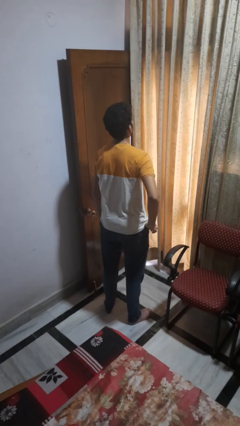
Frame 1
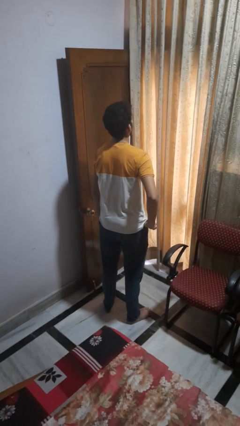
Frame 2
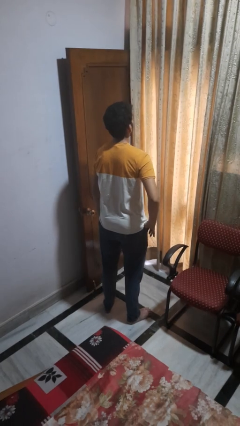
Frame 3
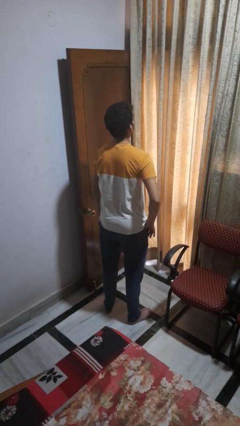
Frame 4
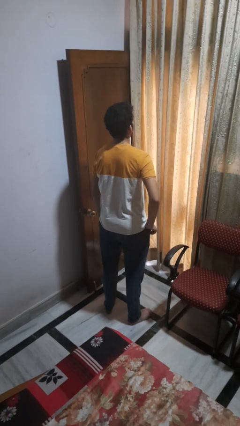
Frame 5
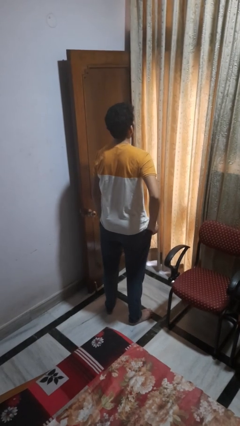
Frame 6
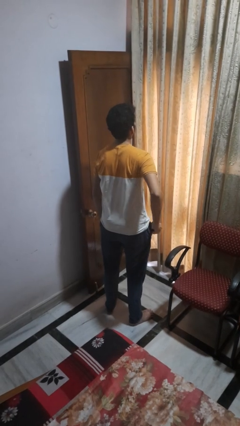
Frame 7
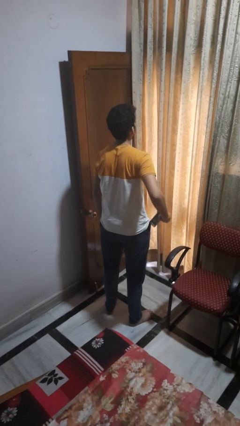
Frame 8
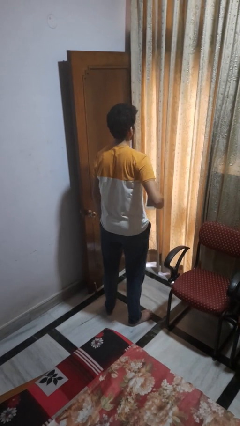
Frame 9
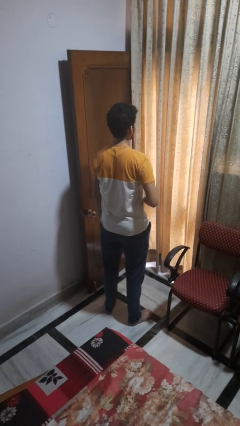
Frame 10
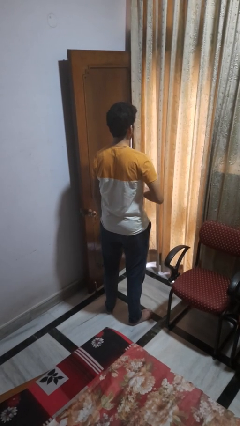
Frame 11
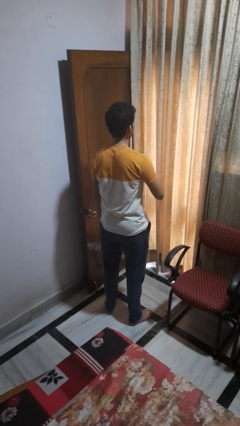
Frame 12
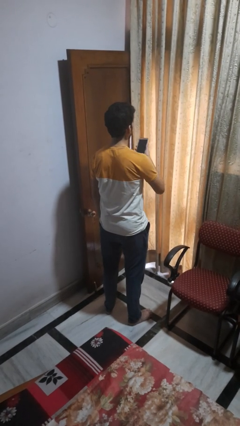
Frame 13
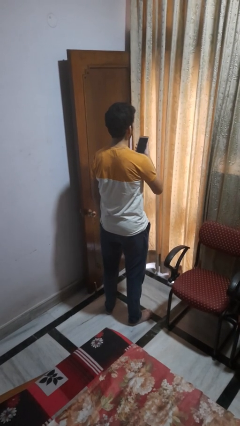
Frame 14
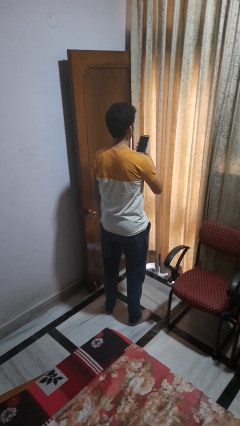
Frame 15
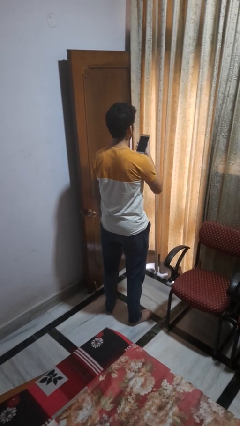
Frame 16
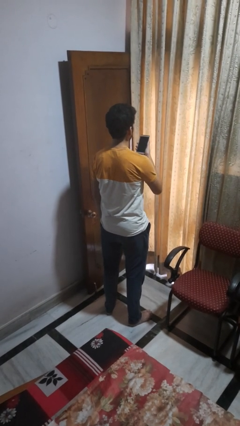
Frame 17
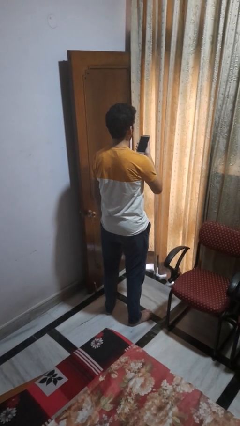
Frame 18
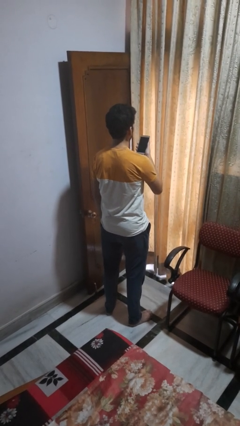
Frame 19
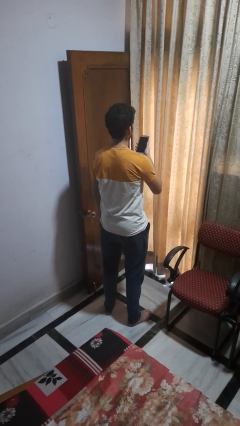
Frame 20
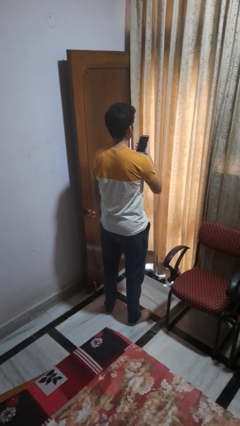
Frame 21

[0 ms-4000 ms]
person takes phone from pocket

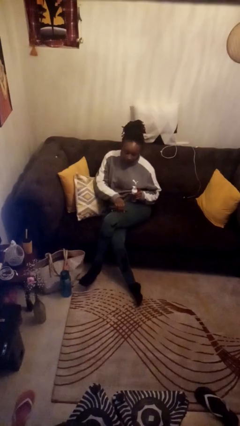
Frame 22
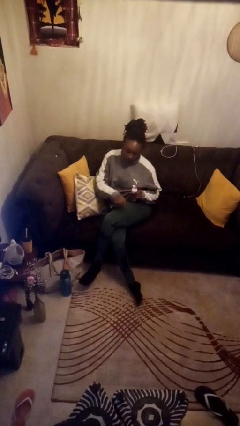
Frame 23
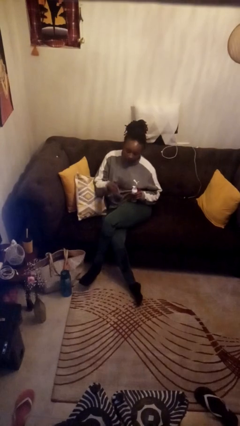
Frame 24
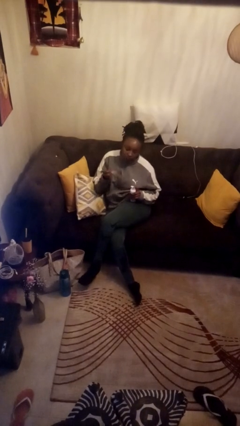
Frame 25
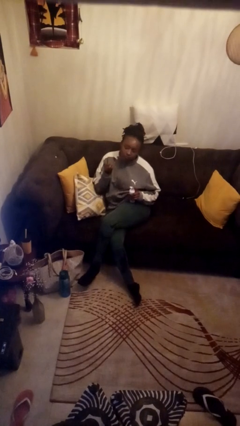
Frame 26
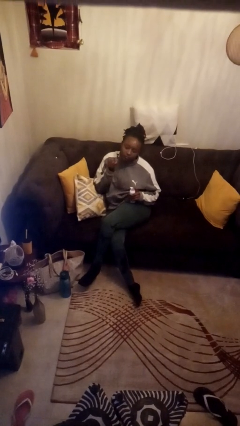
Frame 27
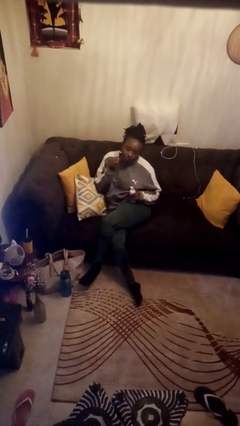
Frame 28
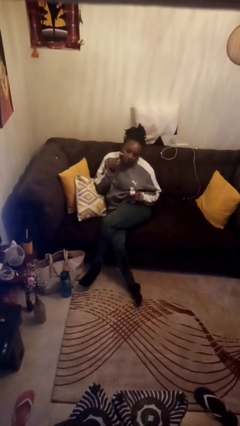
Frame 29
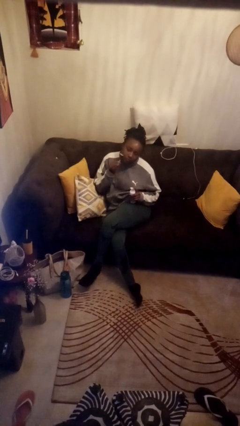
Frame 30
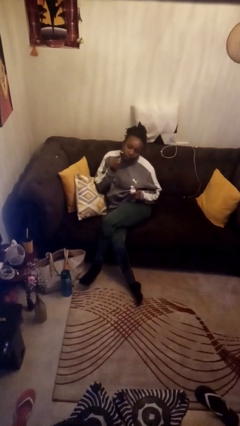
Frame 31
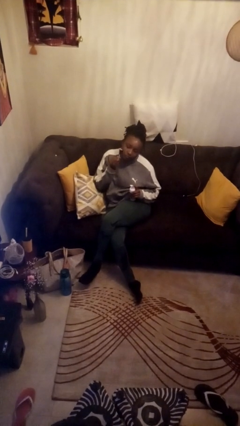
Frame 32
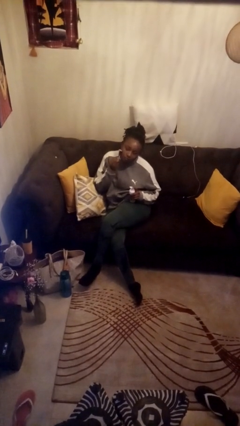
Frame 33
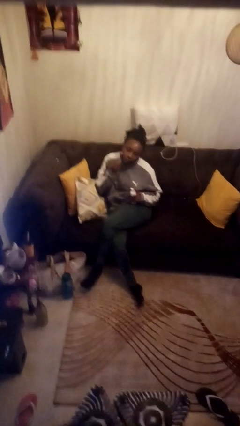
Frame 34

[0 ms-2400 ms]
person shaves face

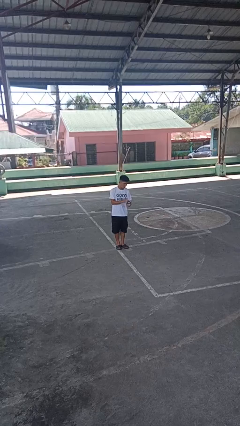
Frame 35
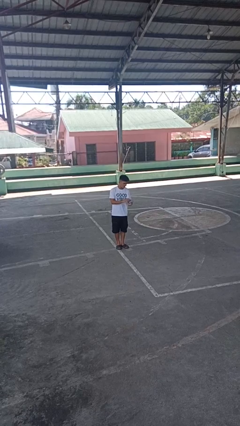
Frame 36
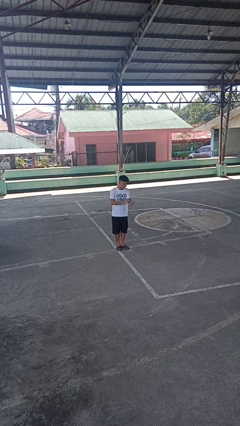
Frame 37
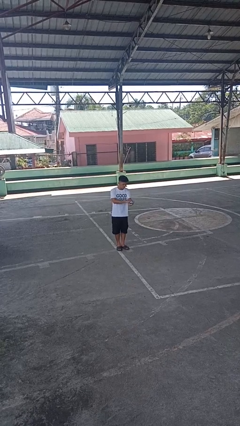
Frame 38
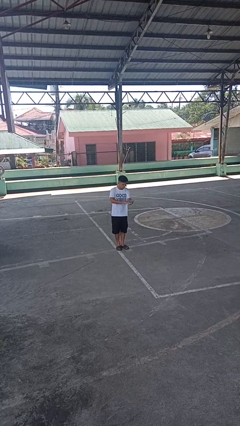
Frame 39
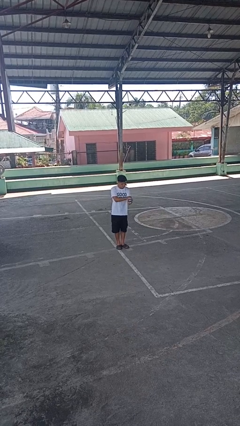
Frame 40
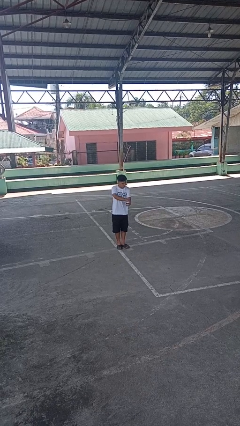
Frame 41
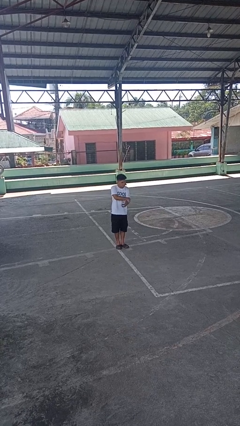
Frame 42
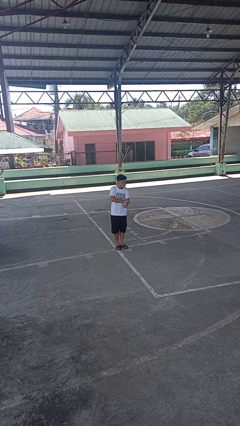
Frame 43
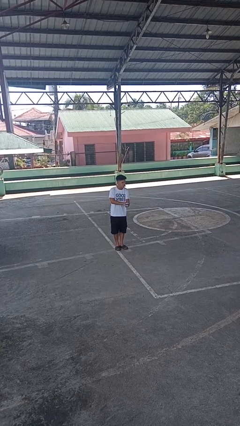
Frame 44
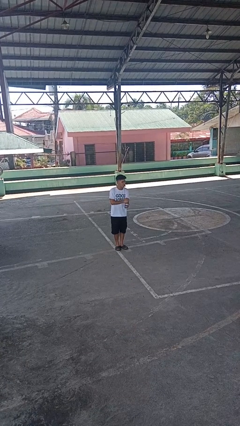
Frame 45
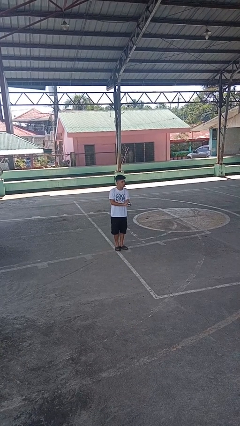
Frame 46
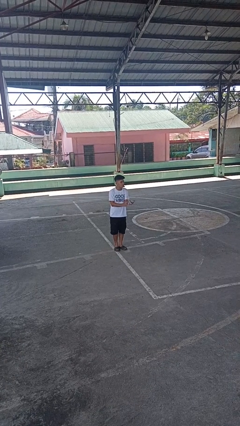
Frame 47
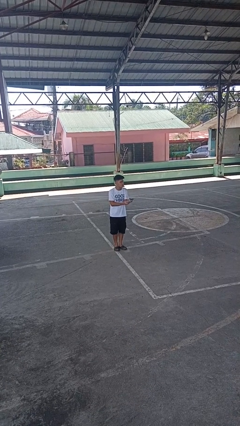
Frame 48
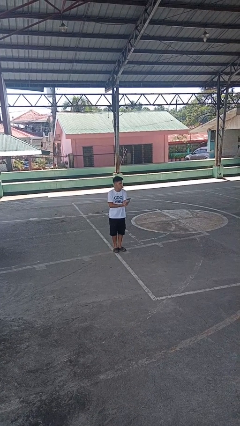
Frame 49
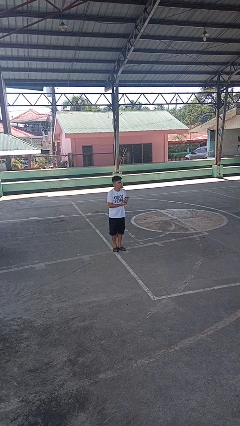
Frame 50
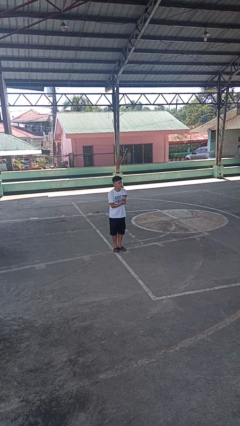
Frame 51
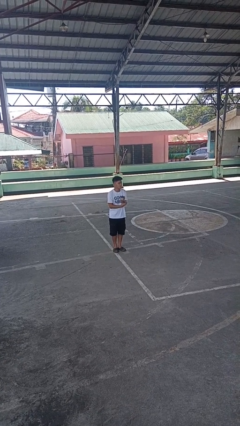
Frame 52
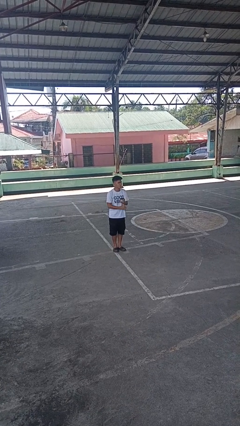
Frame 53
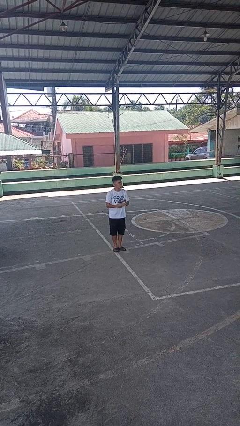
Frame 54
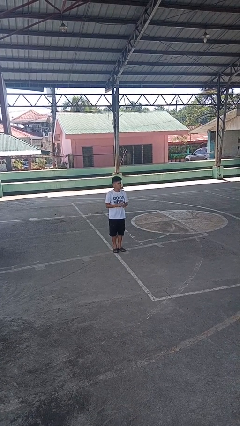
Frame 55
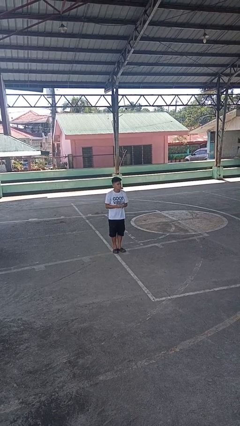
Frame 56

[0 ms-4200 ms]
person applies sunscreen

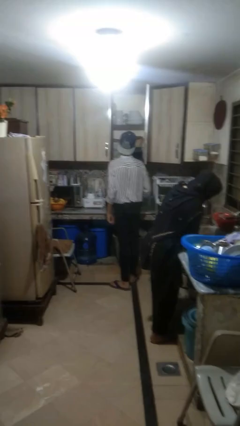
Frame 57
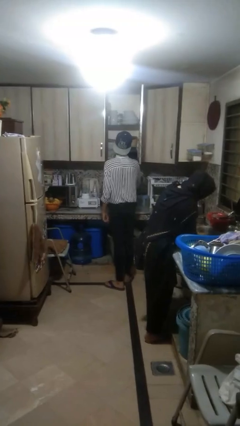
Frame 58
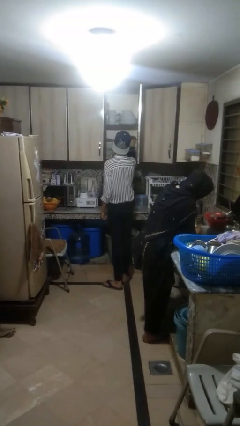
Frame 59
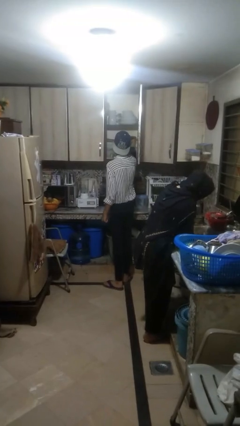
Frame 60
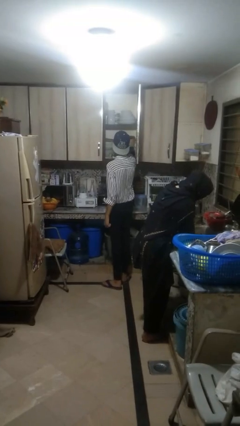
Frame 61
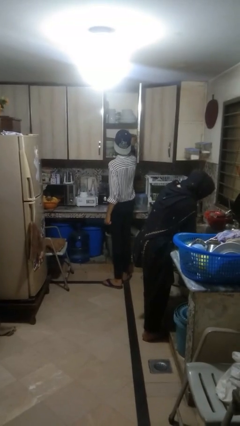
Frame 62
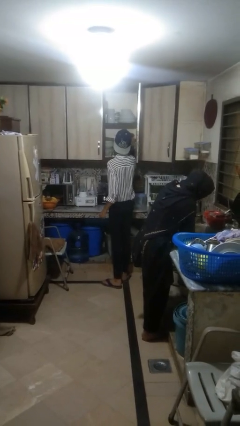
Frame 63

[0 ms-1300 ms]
person takes object from cabinet

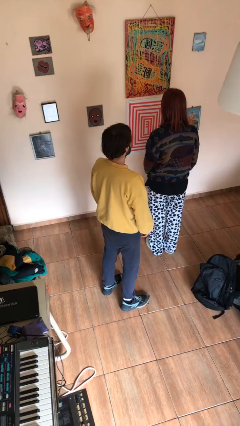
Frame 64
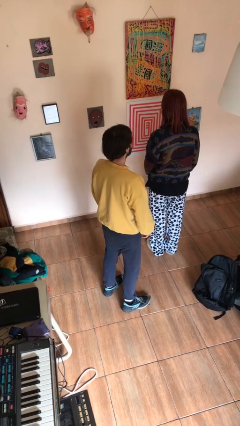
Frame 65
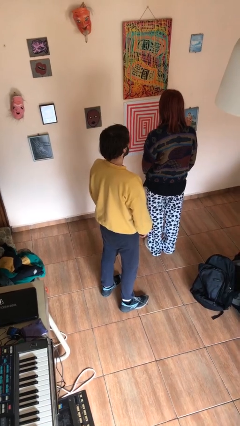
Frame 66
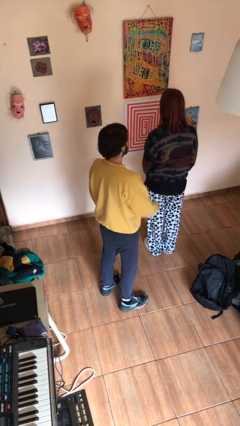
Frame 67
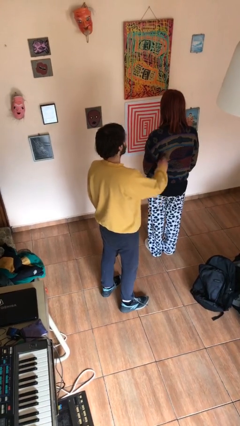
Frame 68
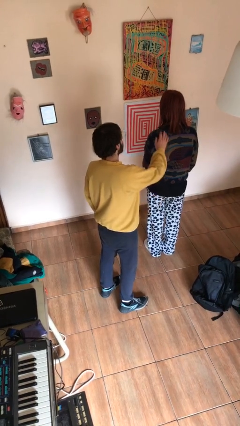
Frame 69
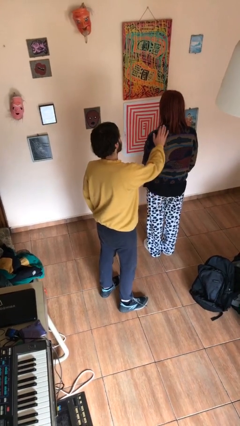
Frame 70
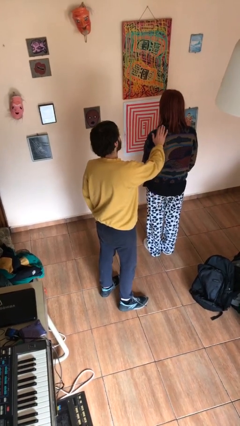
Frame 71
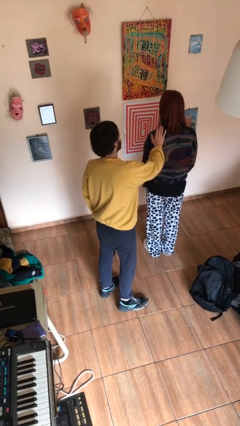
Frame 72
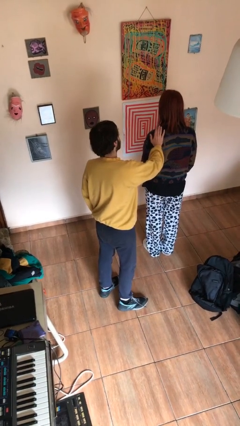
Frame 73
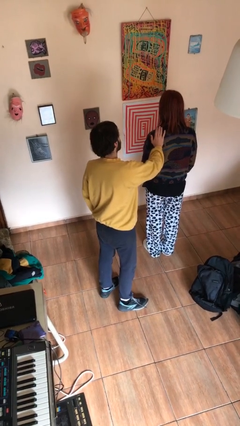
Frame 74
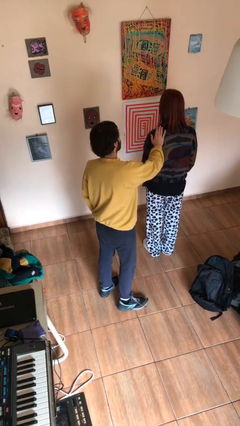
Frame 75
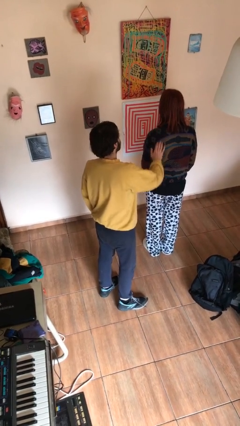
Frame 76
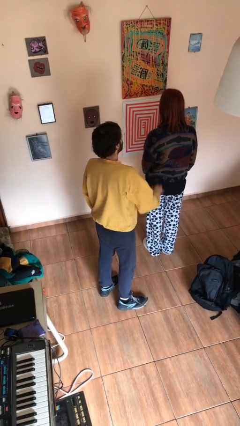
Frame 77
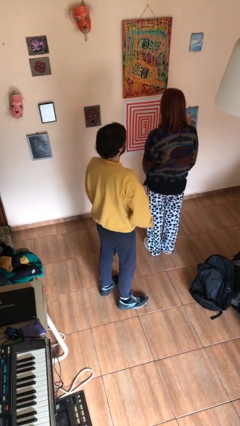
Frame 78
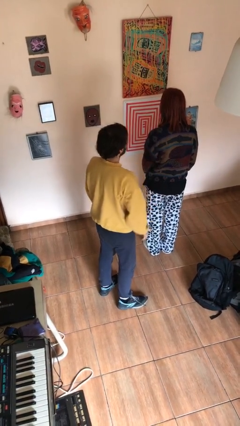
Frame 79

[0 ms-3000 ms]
person touches back of person

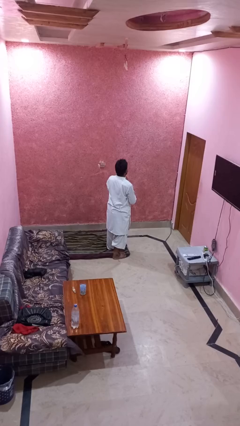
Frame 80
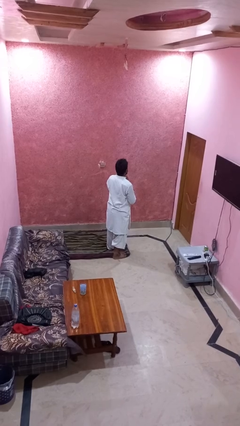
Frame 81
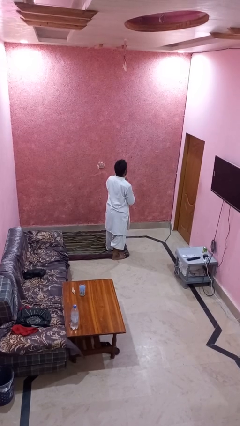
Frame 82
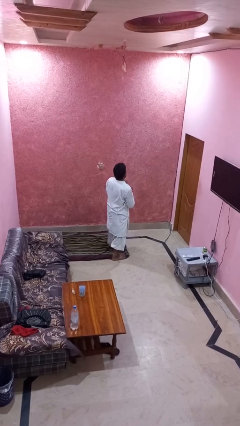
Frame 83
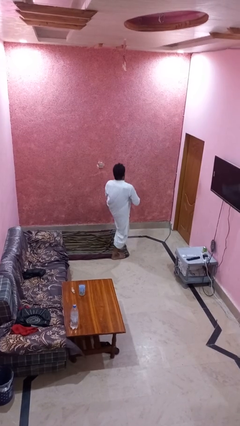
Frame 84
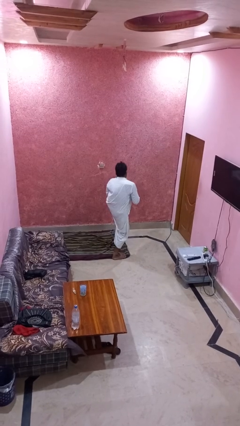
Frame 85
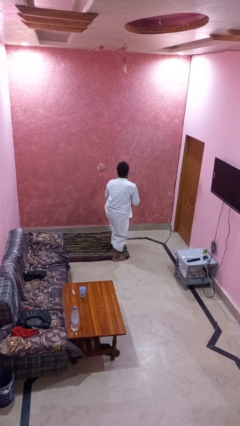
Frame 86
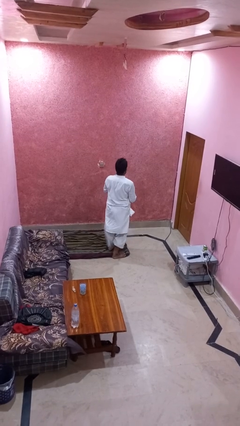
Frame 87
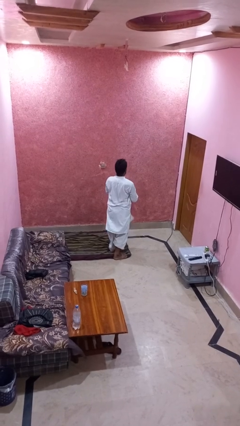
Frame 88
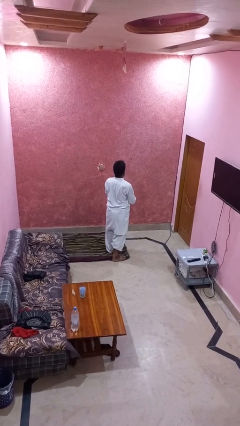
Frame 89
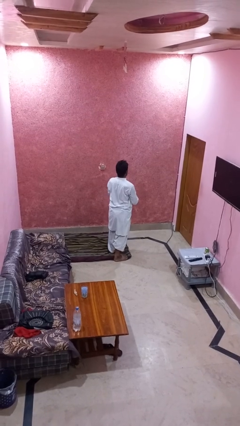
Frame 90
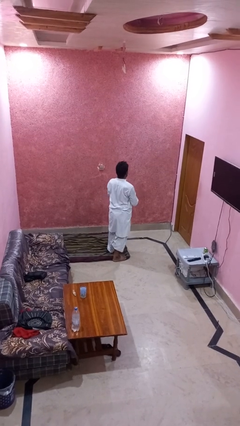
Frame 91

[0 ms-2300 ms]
person karate kicks

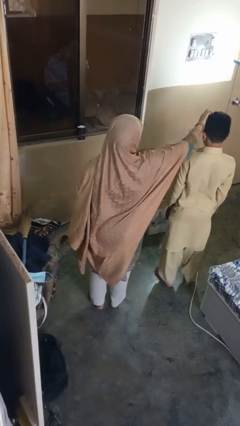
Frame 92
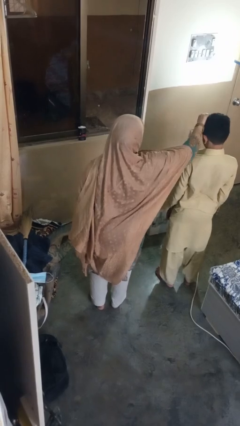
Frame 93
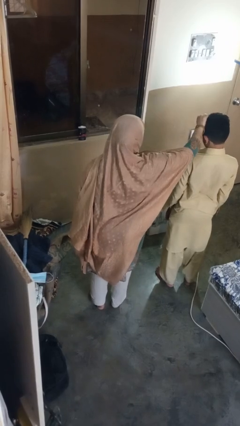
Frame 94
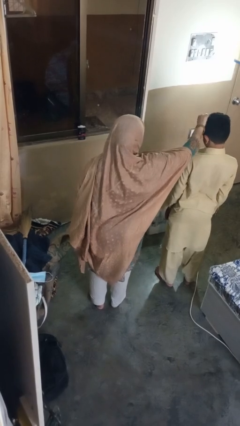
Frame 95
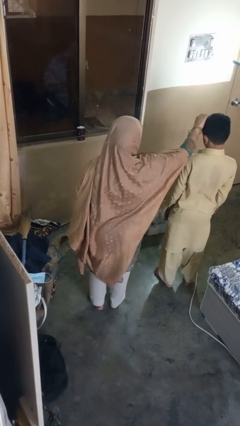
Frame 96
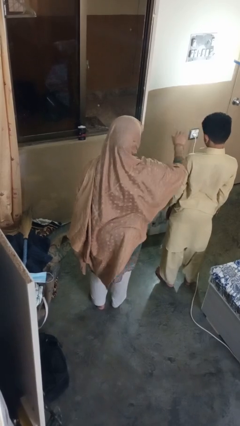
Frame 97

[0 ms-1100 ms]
person grabs person by hair
